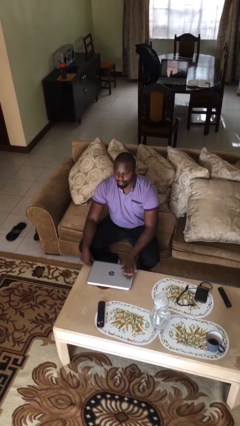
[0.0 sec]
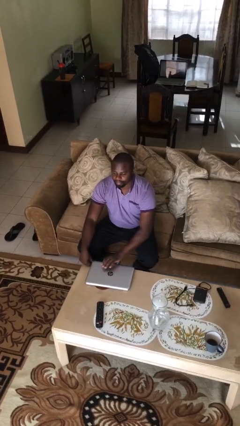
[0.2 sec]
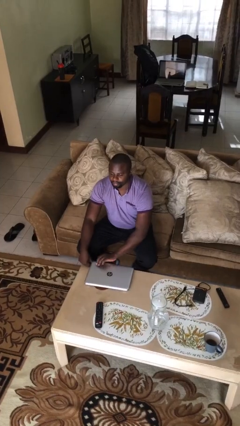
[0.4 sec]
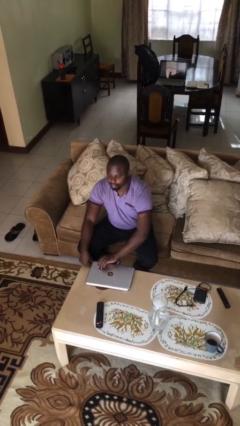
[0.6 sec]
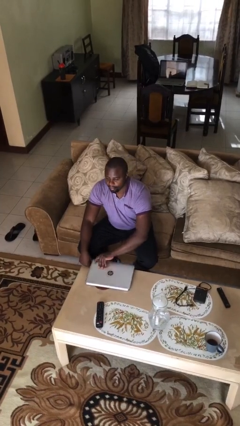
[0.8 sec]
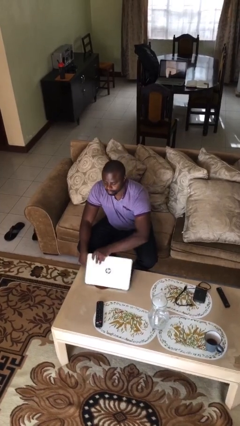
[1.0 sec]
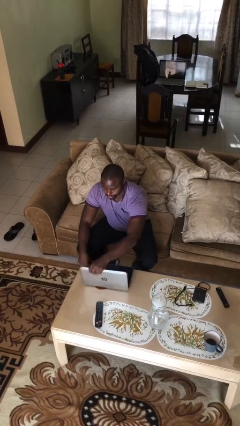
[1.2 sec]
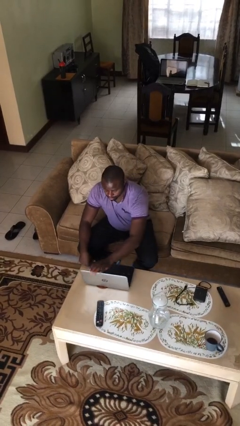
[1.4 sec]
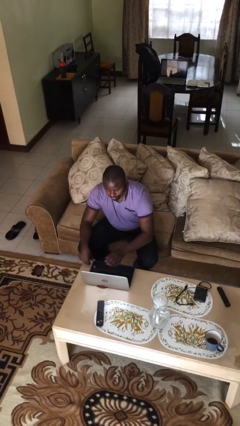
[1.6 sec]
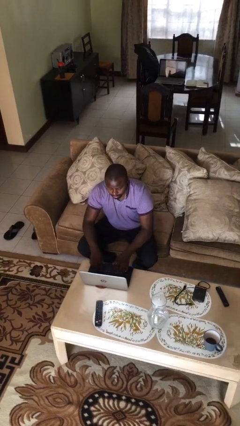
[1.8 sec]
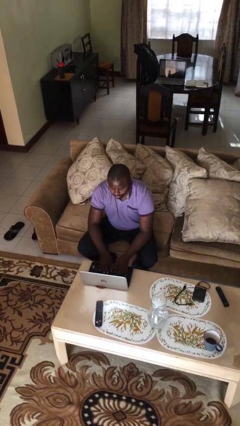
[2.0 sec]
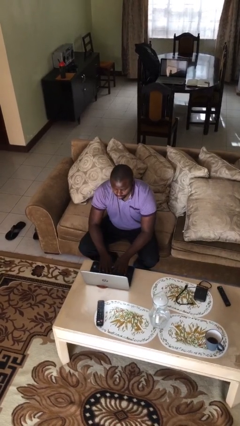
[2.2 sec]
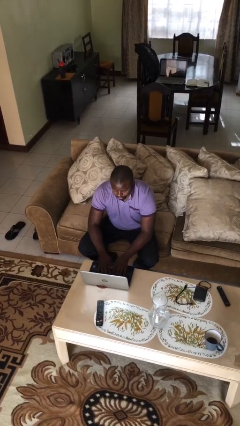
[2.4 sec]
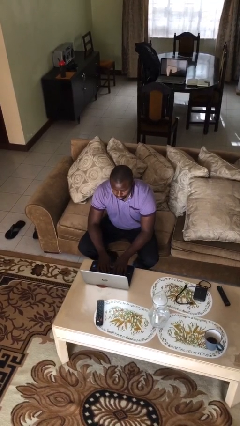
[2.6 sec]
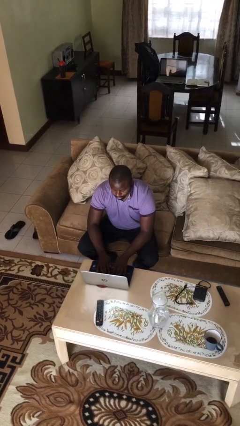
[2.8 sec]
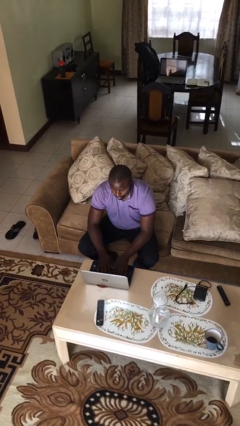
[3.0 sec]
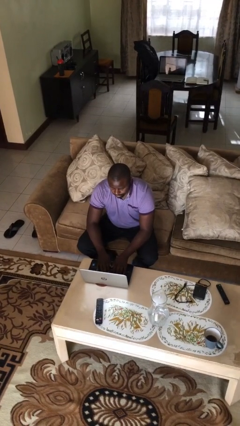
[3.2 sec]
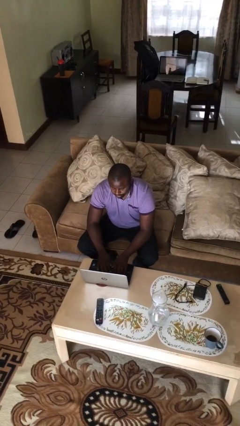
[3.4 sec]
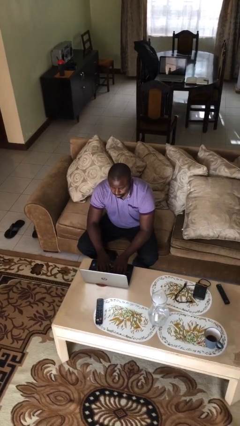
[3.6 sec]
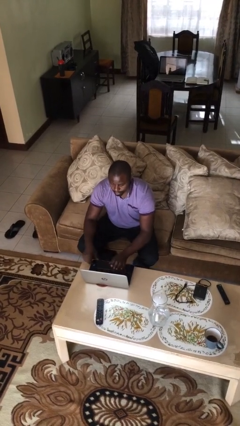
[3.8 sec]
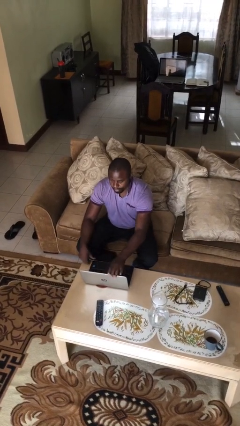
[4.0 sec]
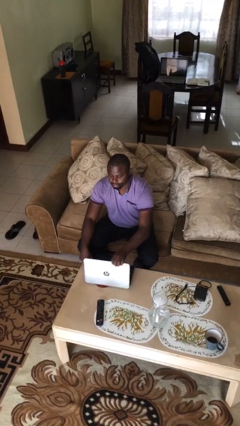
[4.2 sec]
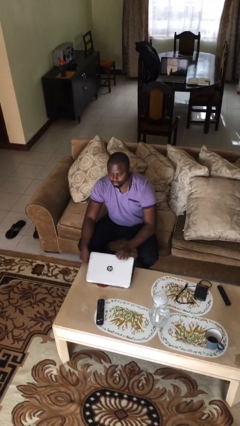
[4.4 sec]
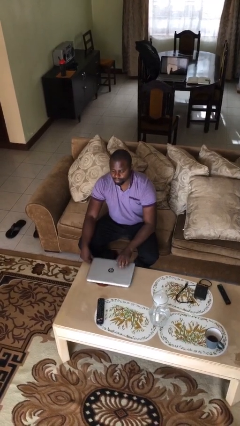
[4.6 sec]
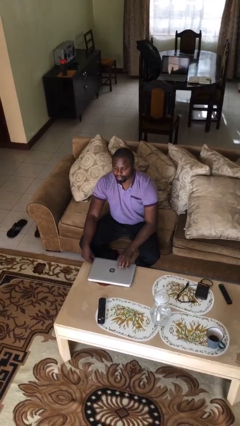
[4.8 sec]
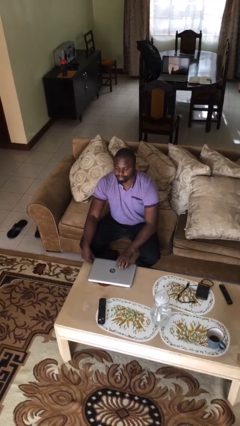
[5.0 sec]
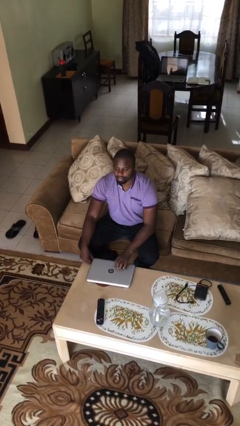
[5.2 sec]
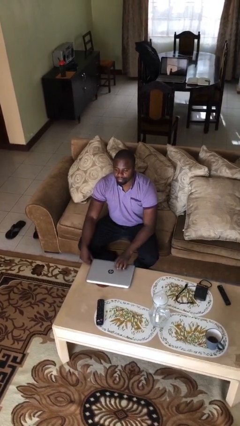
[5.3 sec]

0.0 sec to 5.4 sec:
person interacts with laptop

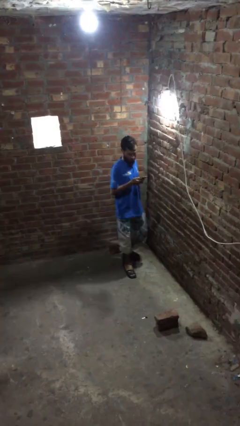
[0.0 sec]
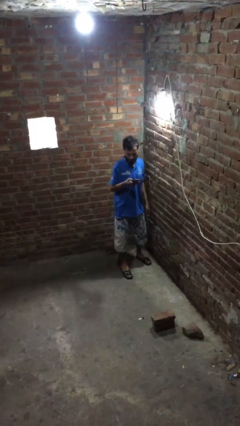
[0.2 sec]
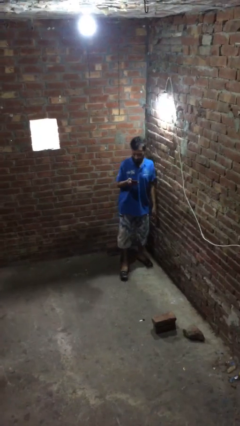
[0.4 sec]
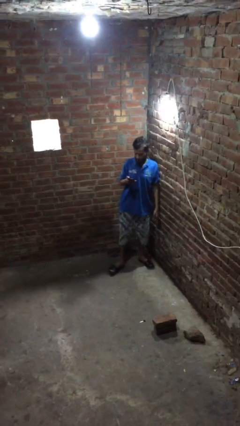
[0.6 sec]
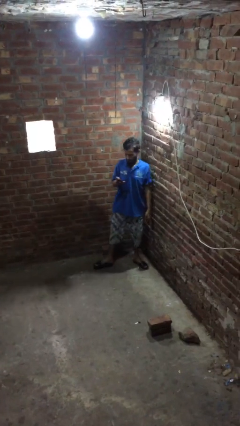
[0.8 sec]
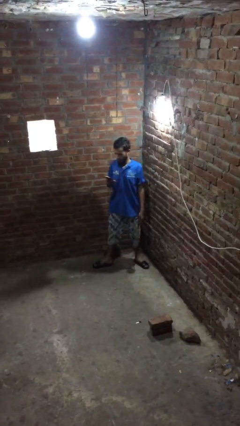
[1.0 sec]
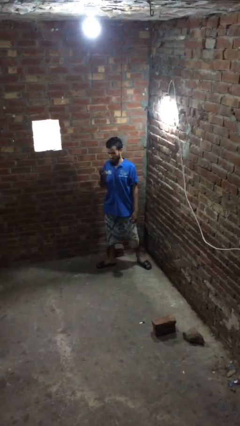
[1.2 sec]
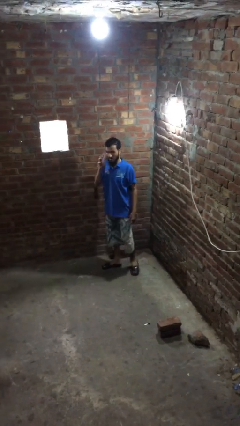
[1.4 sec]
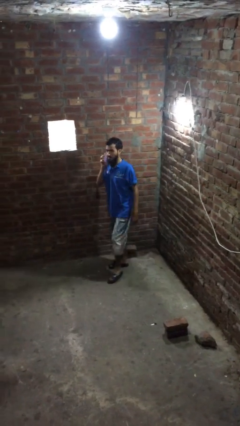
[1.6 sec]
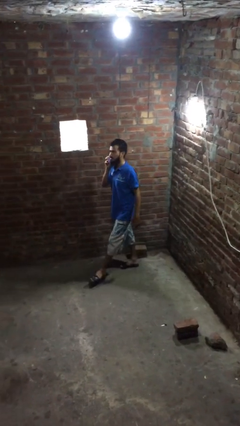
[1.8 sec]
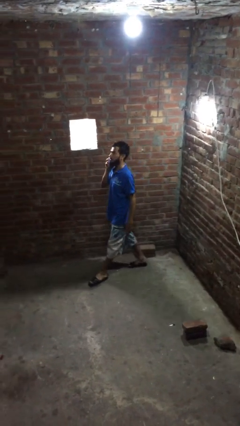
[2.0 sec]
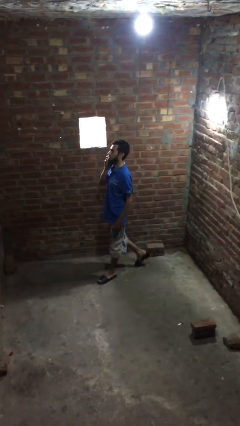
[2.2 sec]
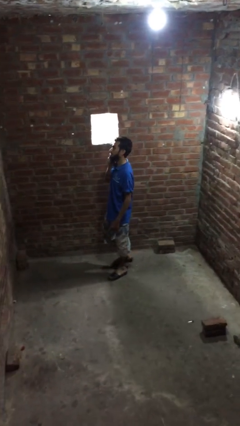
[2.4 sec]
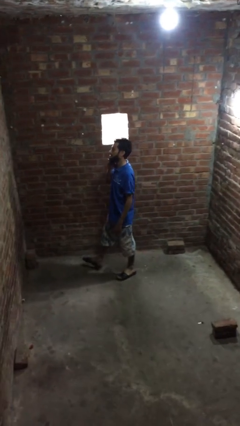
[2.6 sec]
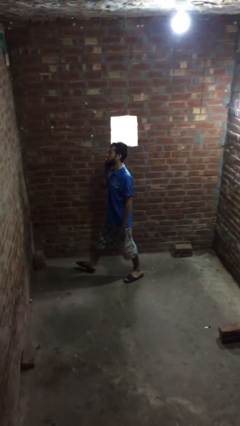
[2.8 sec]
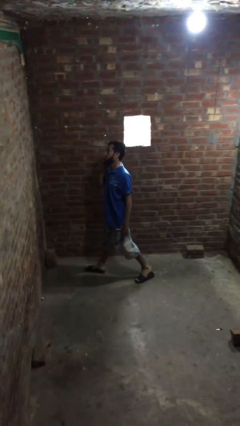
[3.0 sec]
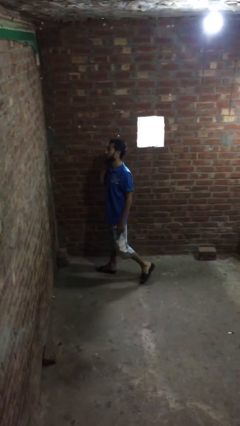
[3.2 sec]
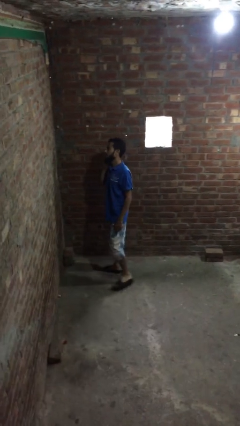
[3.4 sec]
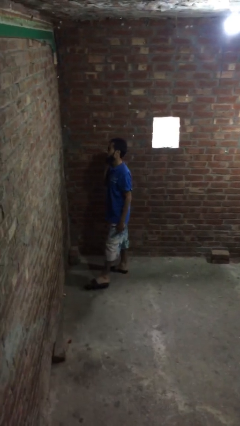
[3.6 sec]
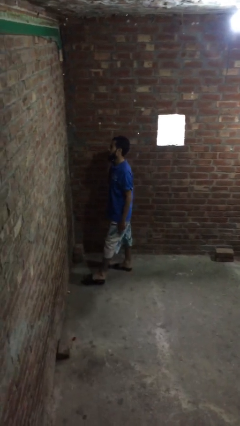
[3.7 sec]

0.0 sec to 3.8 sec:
person talks on phone

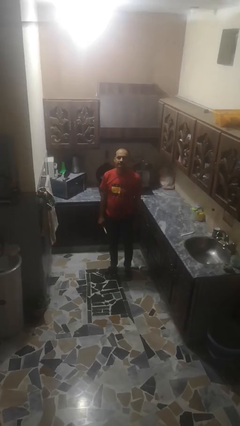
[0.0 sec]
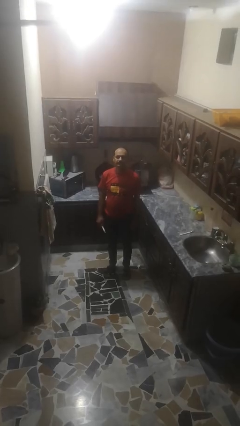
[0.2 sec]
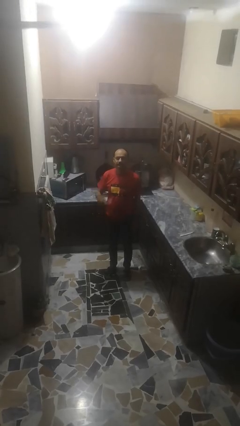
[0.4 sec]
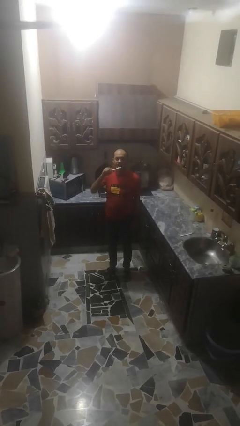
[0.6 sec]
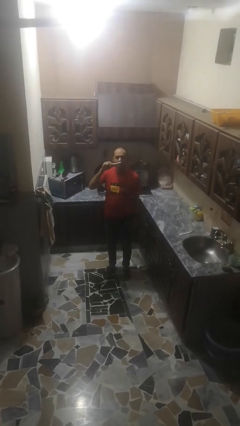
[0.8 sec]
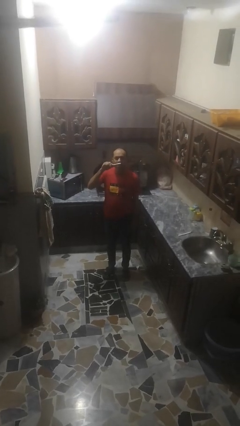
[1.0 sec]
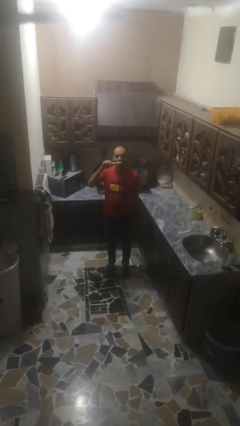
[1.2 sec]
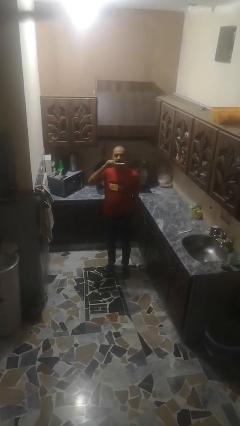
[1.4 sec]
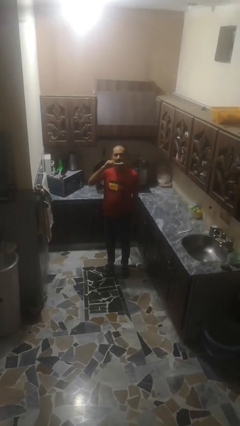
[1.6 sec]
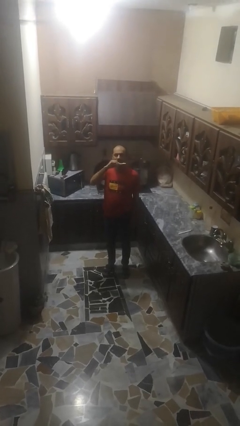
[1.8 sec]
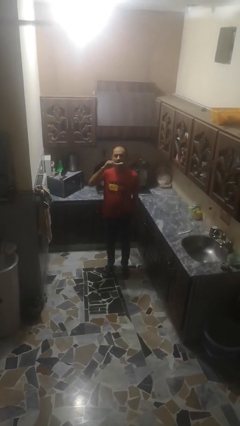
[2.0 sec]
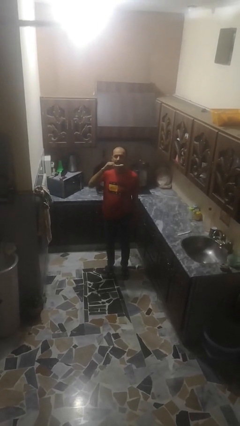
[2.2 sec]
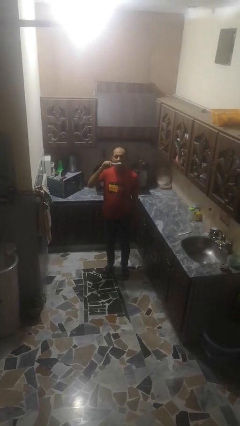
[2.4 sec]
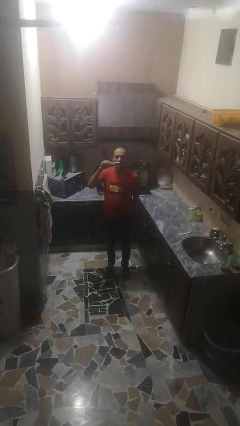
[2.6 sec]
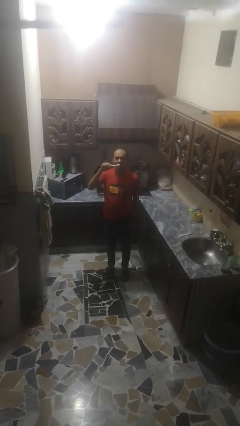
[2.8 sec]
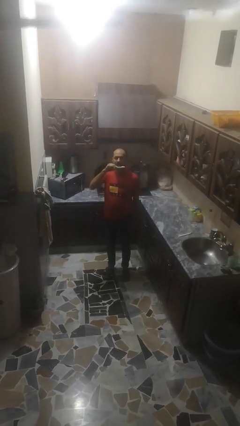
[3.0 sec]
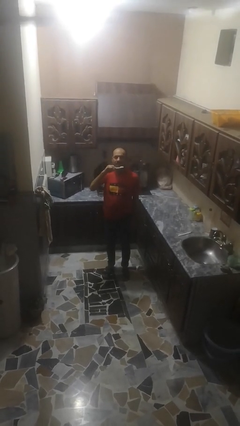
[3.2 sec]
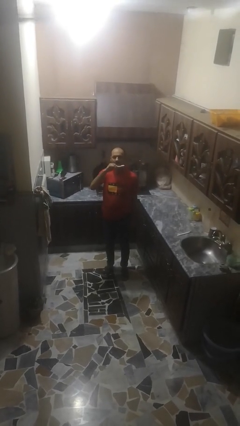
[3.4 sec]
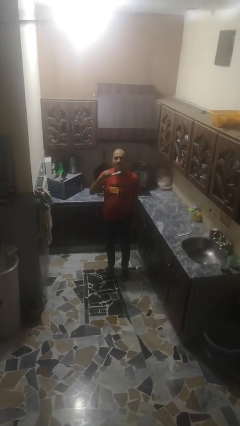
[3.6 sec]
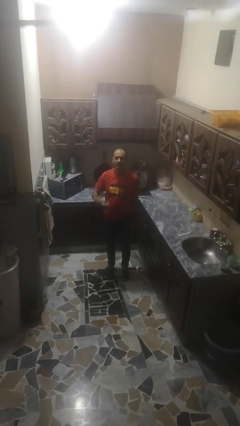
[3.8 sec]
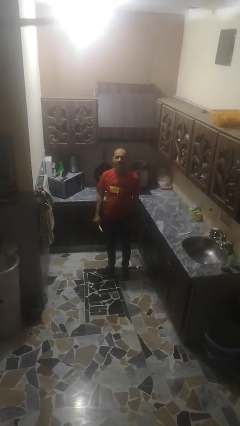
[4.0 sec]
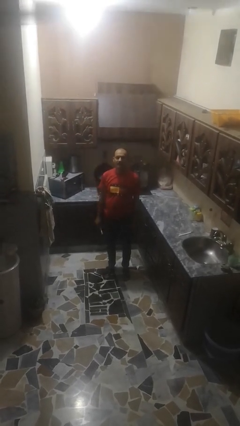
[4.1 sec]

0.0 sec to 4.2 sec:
person brushes teeth

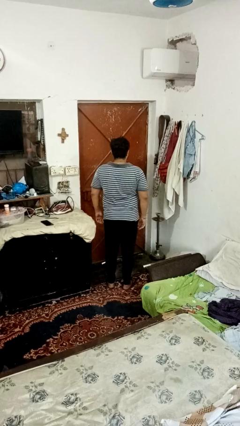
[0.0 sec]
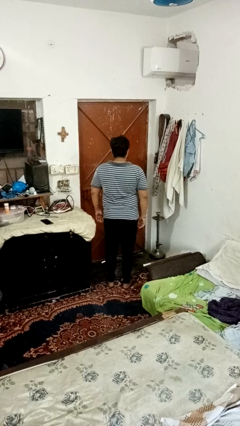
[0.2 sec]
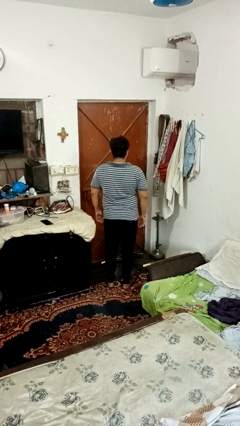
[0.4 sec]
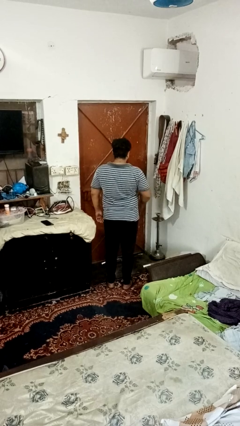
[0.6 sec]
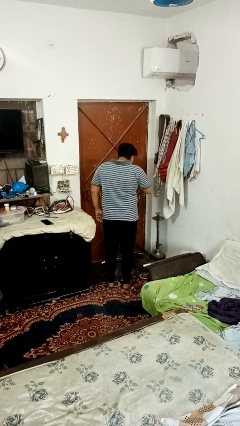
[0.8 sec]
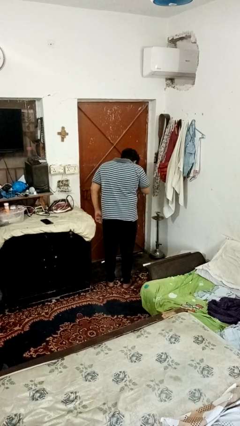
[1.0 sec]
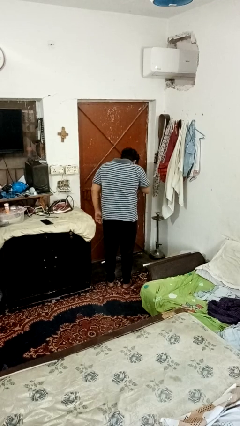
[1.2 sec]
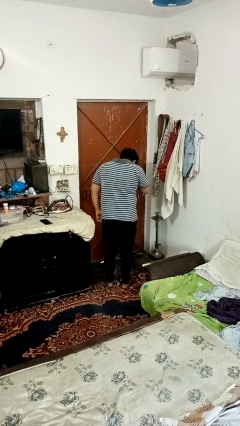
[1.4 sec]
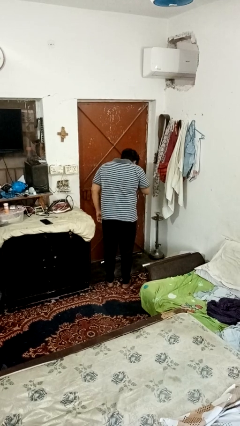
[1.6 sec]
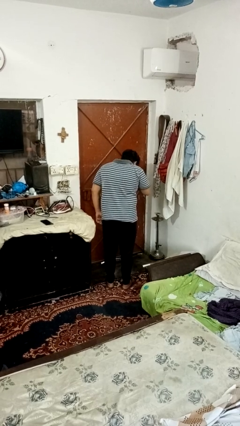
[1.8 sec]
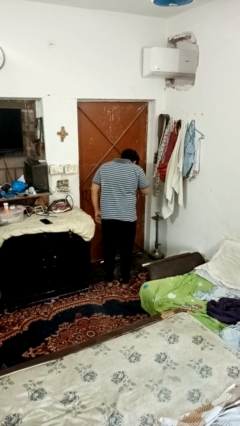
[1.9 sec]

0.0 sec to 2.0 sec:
person sneezes into hand

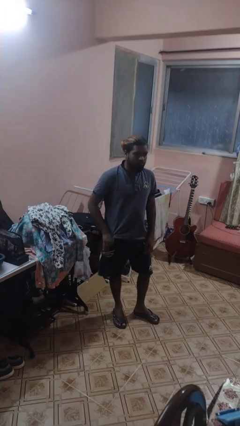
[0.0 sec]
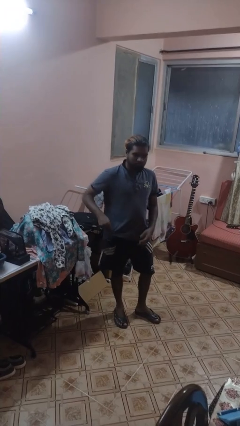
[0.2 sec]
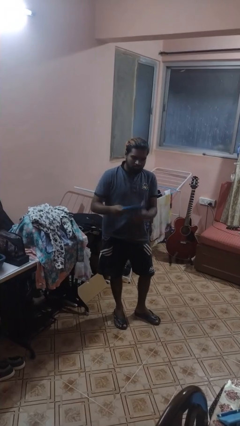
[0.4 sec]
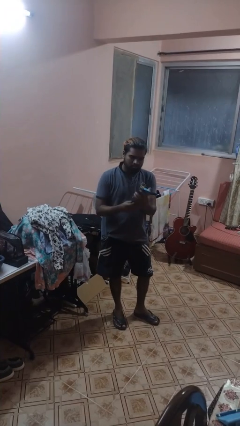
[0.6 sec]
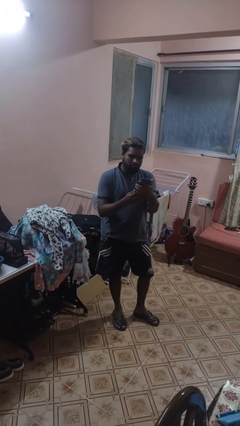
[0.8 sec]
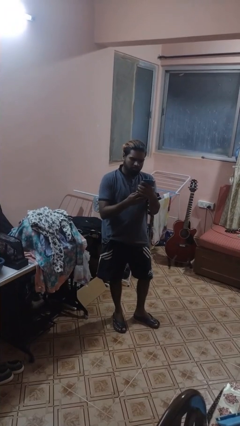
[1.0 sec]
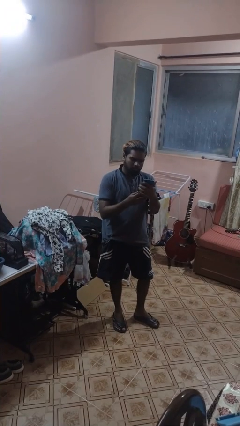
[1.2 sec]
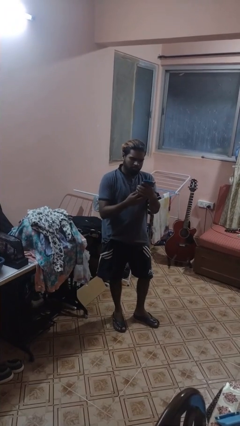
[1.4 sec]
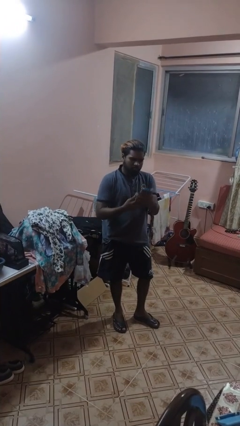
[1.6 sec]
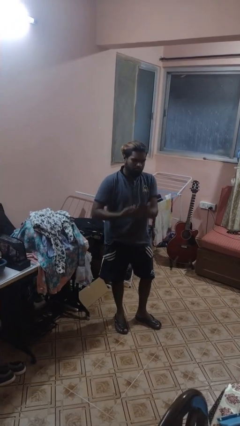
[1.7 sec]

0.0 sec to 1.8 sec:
person takes phone from pocket
